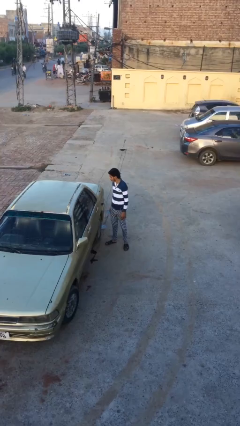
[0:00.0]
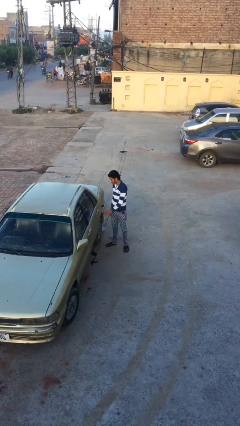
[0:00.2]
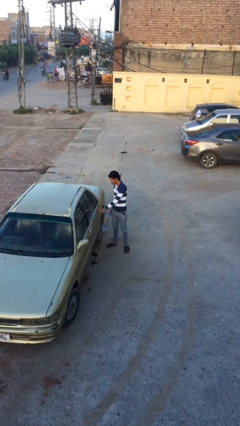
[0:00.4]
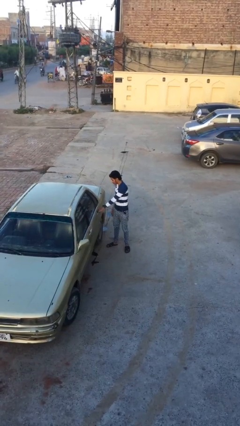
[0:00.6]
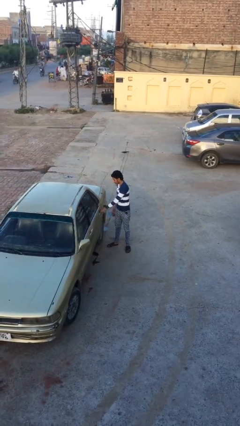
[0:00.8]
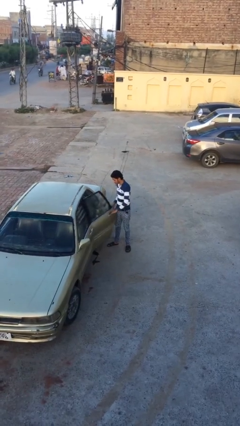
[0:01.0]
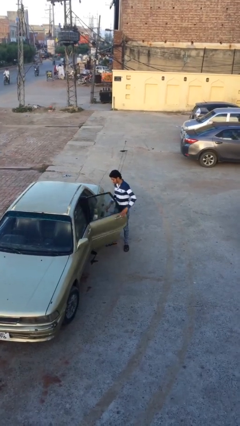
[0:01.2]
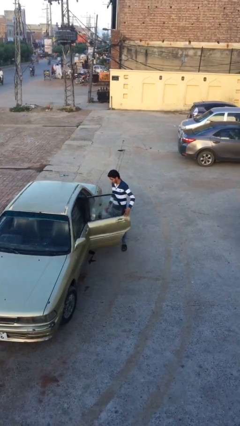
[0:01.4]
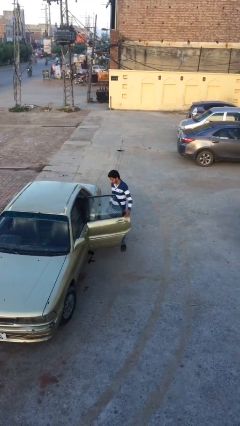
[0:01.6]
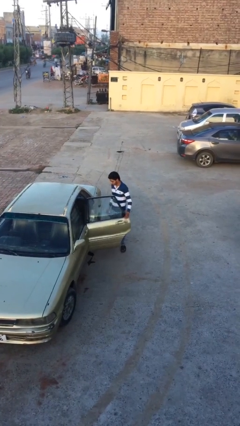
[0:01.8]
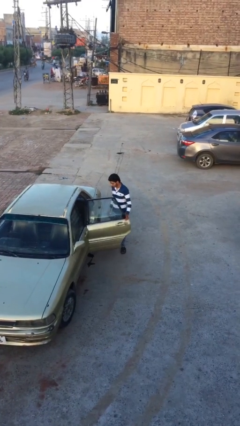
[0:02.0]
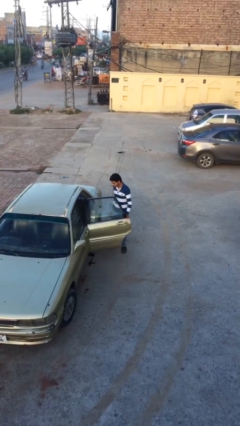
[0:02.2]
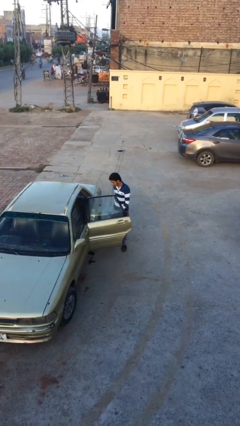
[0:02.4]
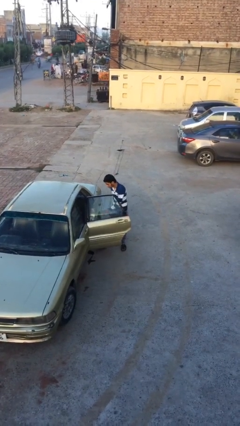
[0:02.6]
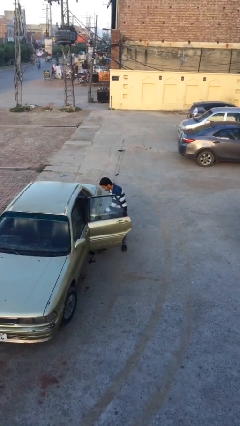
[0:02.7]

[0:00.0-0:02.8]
person opens car door

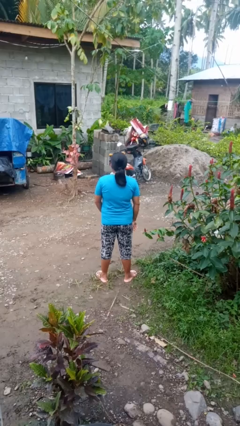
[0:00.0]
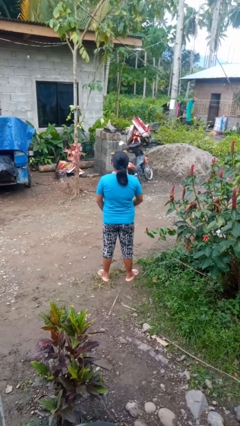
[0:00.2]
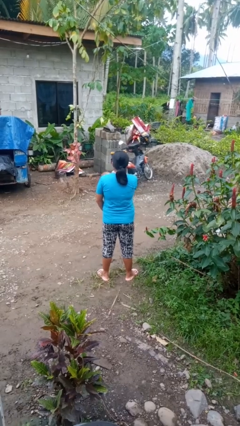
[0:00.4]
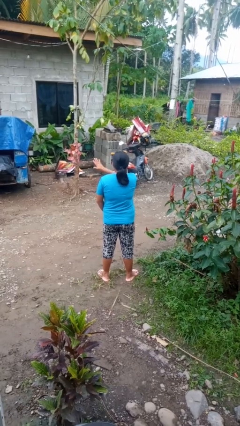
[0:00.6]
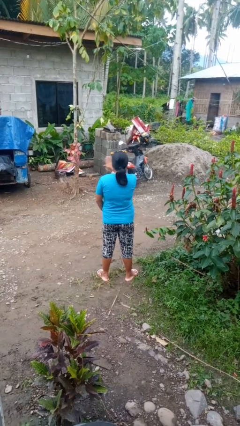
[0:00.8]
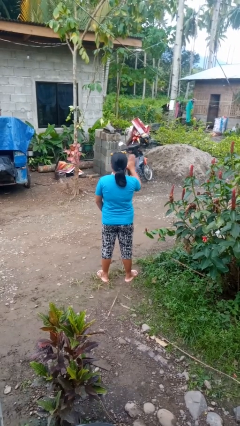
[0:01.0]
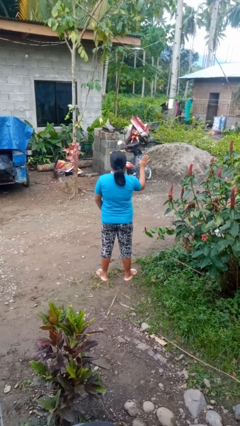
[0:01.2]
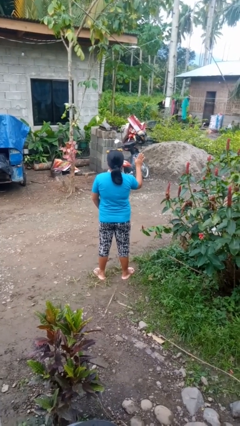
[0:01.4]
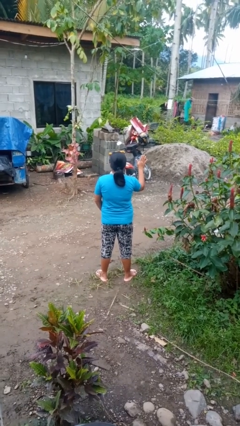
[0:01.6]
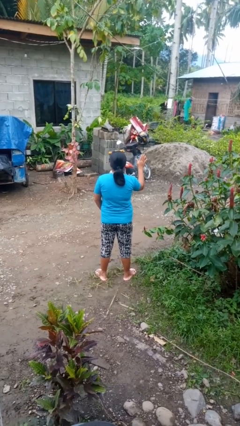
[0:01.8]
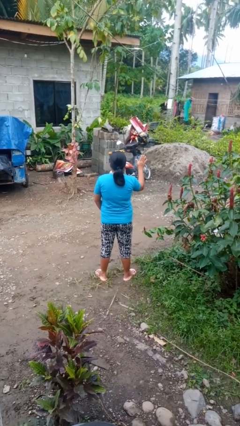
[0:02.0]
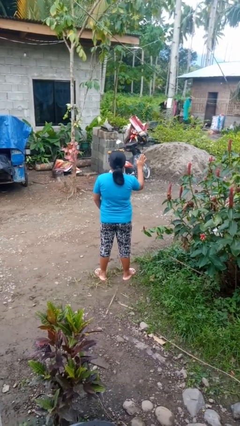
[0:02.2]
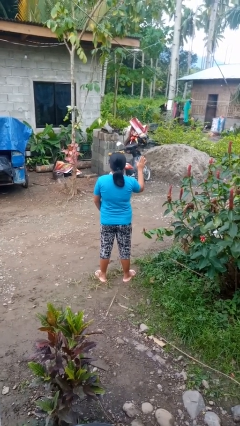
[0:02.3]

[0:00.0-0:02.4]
person gestures swipe right

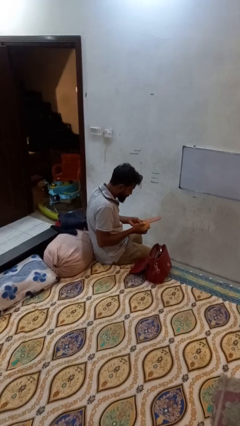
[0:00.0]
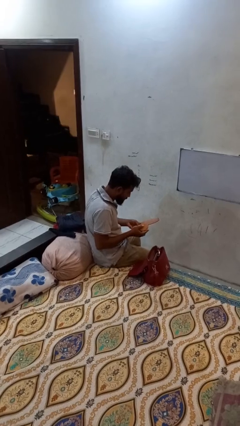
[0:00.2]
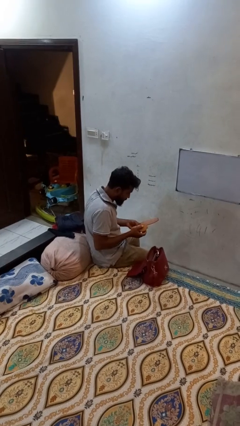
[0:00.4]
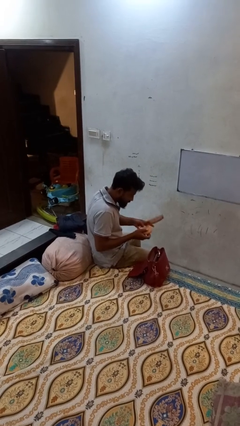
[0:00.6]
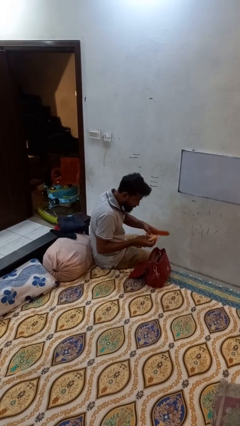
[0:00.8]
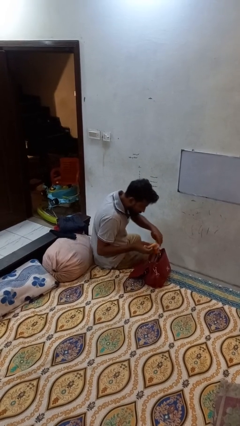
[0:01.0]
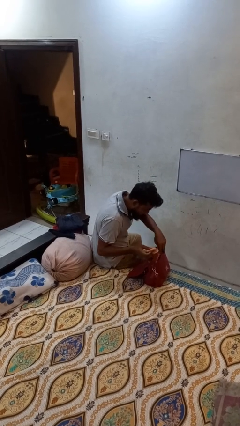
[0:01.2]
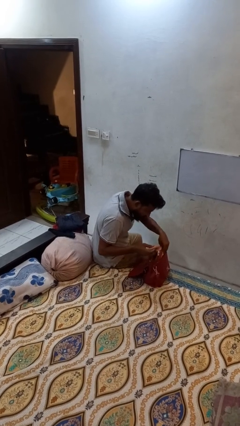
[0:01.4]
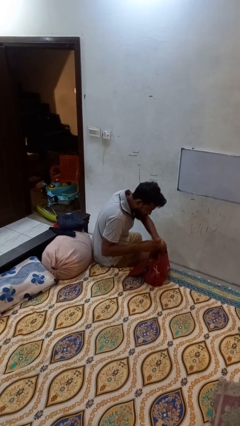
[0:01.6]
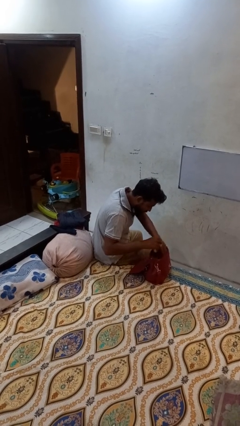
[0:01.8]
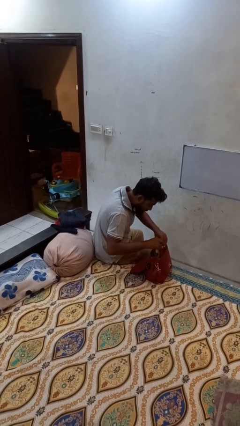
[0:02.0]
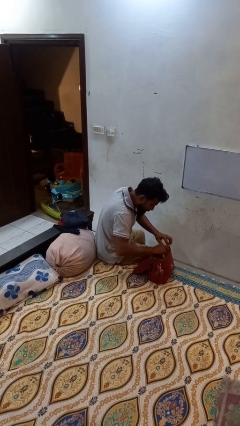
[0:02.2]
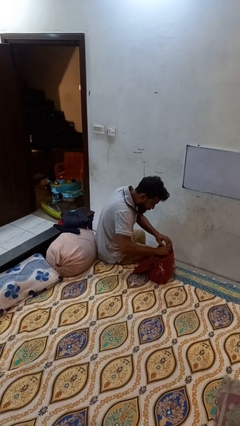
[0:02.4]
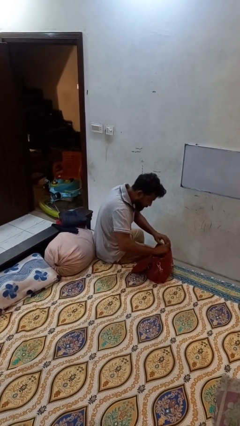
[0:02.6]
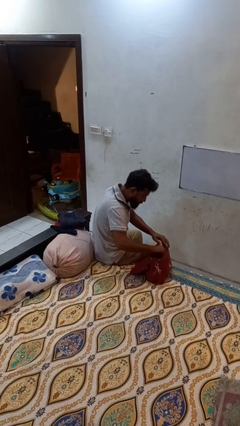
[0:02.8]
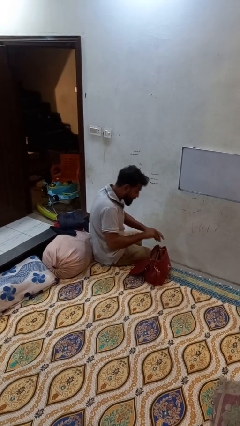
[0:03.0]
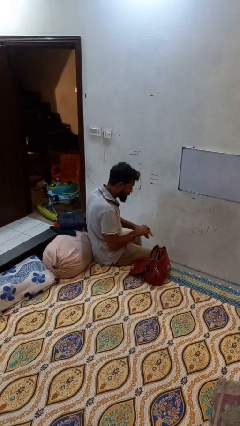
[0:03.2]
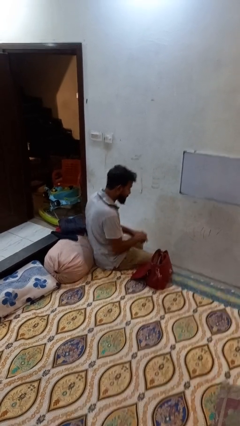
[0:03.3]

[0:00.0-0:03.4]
person puts object into purse

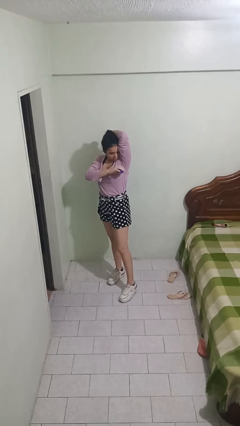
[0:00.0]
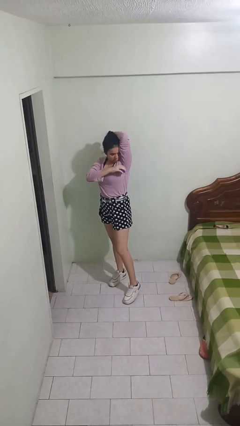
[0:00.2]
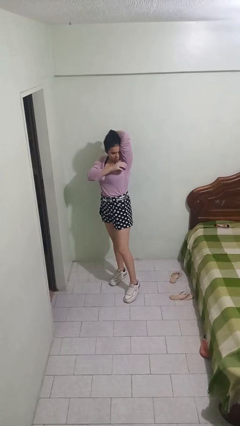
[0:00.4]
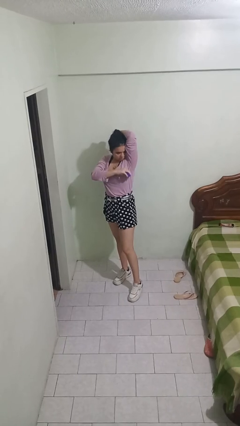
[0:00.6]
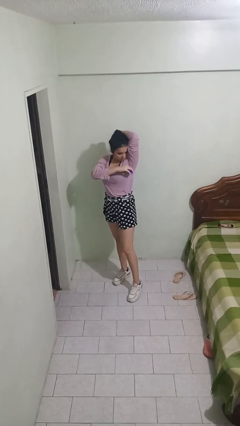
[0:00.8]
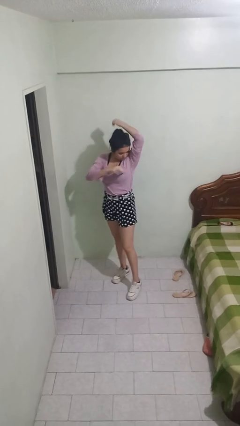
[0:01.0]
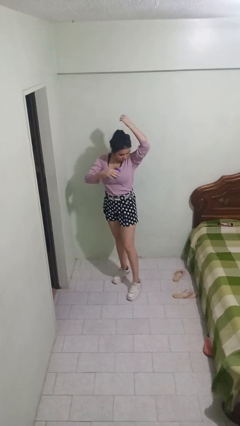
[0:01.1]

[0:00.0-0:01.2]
person applies deodorant

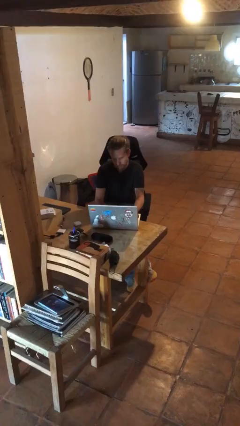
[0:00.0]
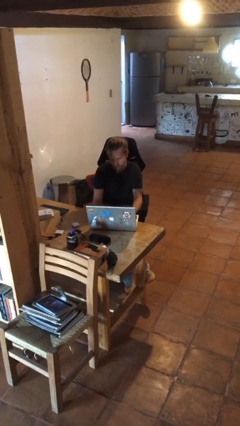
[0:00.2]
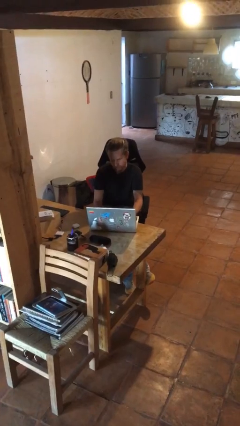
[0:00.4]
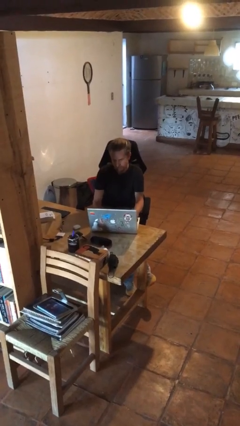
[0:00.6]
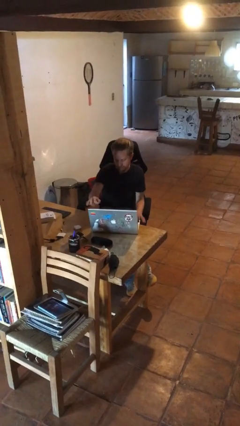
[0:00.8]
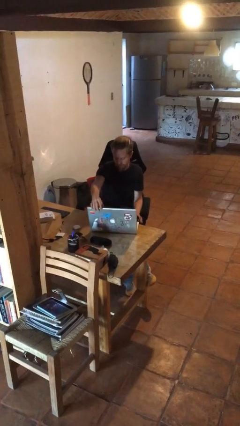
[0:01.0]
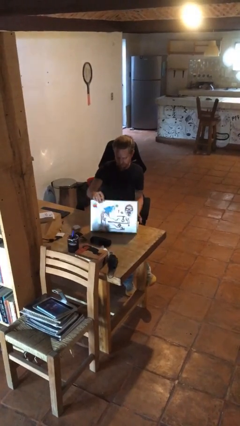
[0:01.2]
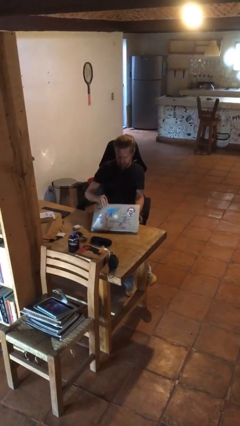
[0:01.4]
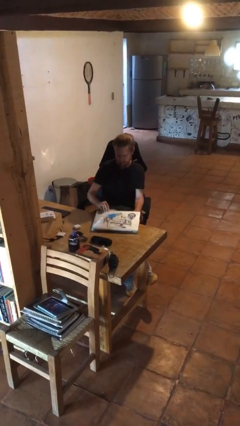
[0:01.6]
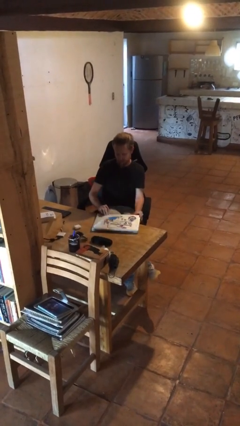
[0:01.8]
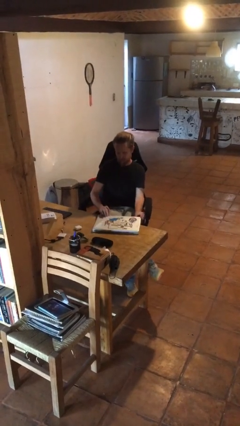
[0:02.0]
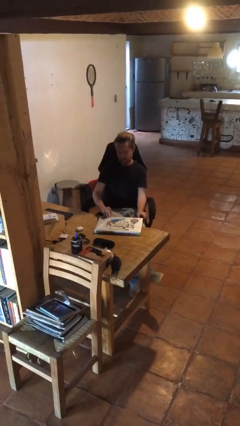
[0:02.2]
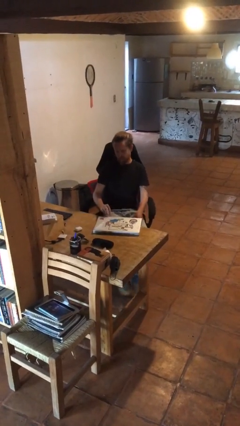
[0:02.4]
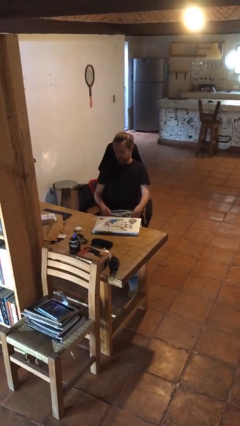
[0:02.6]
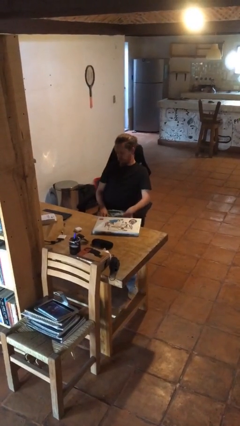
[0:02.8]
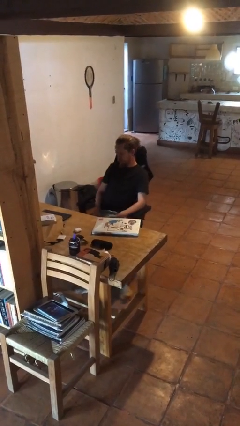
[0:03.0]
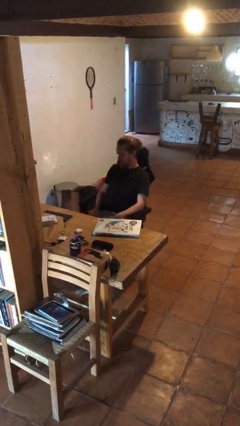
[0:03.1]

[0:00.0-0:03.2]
person closes laptop

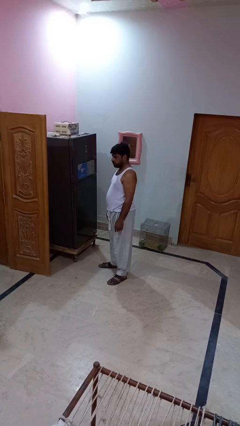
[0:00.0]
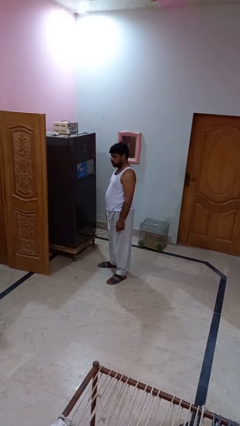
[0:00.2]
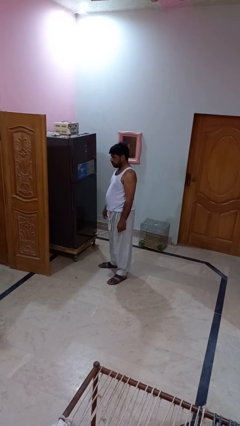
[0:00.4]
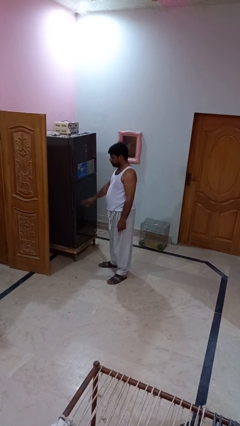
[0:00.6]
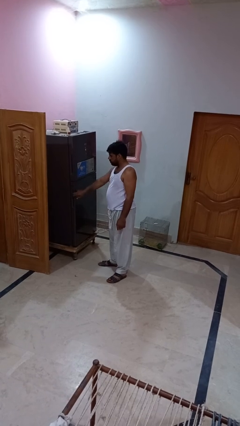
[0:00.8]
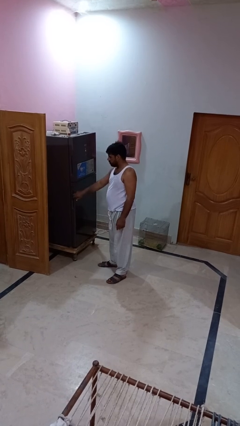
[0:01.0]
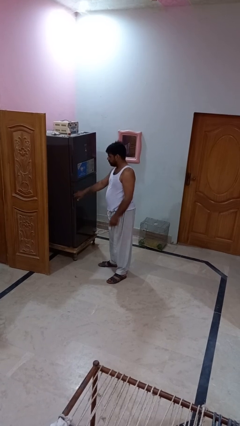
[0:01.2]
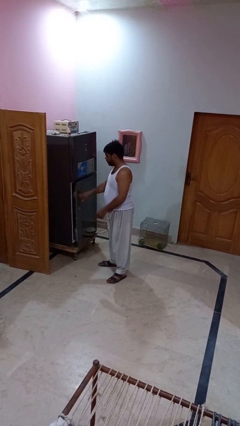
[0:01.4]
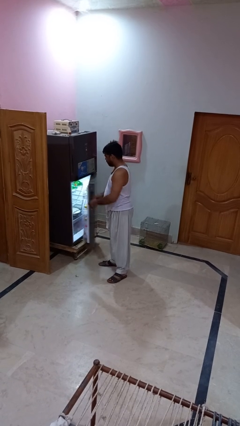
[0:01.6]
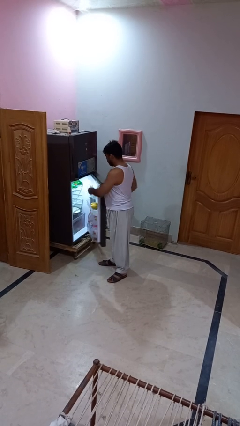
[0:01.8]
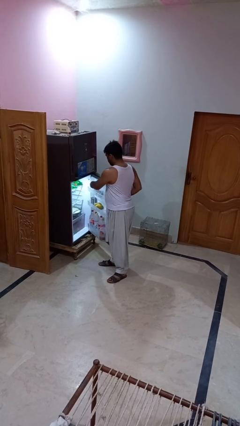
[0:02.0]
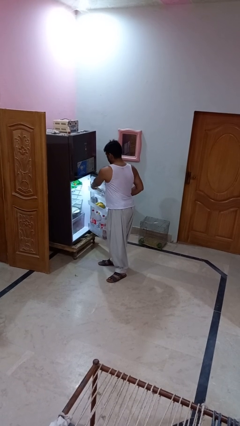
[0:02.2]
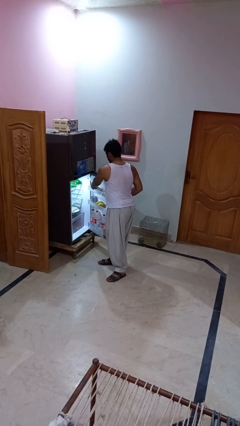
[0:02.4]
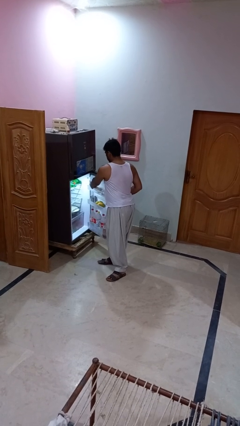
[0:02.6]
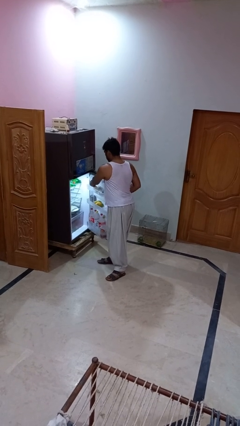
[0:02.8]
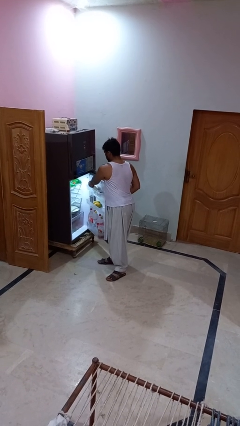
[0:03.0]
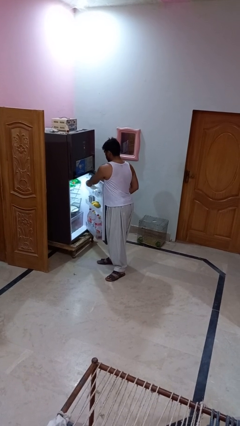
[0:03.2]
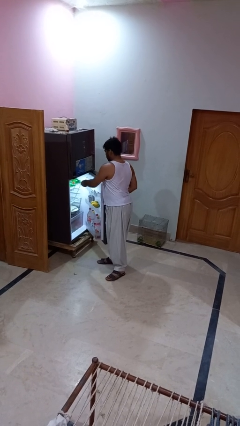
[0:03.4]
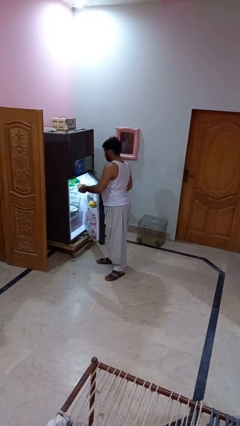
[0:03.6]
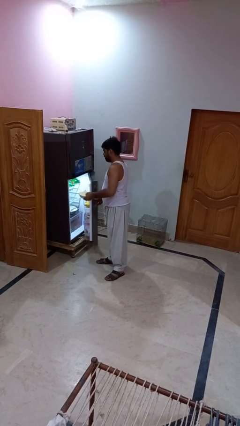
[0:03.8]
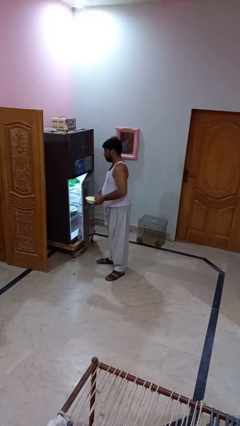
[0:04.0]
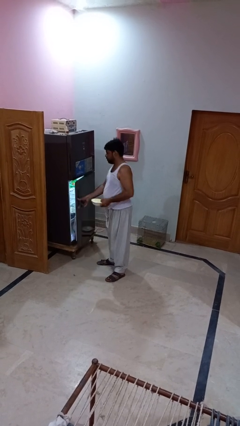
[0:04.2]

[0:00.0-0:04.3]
person takes object from refrigerator
